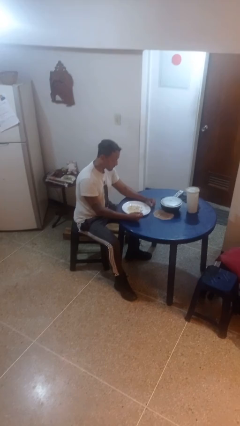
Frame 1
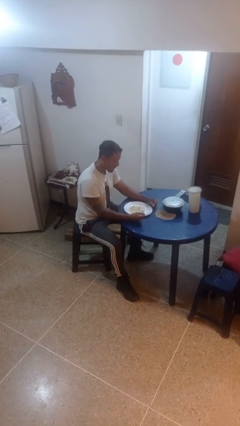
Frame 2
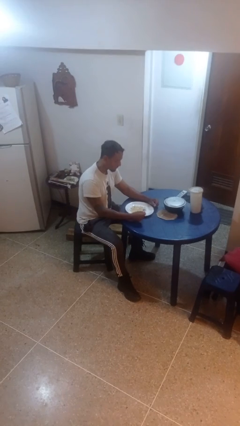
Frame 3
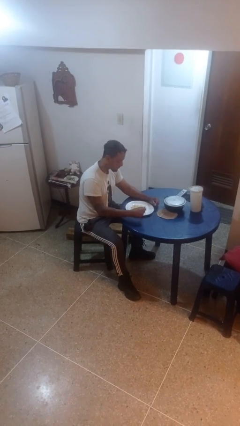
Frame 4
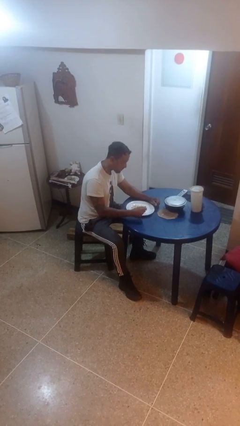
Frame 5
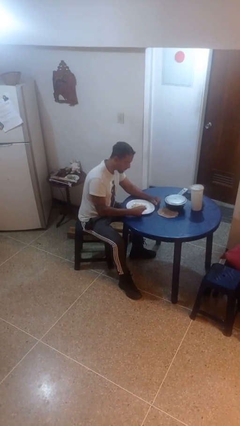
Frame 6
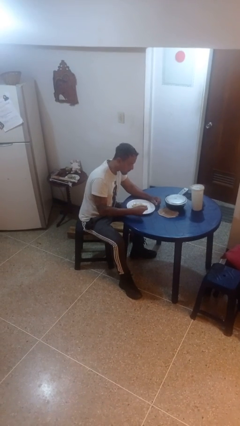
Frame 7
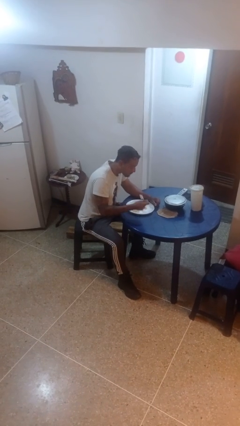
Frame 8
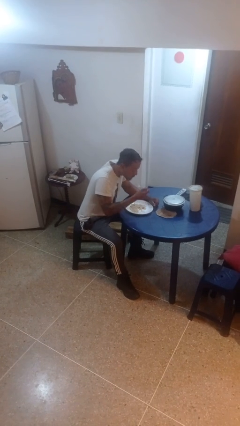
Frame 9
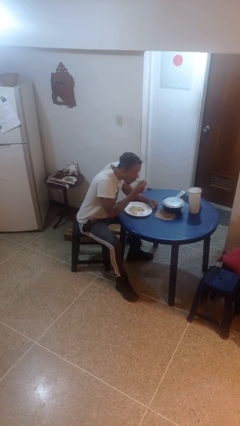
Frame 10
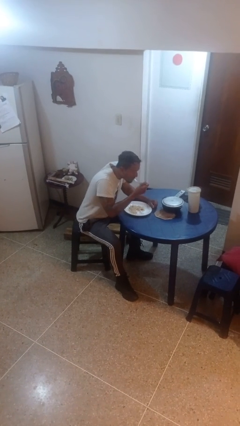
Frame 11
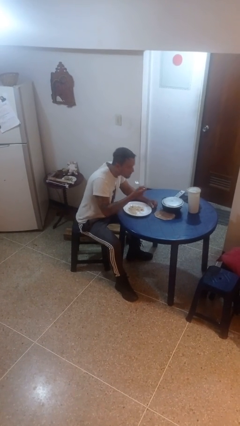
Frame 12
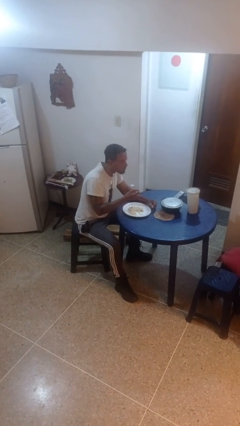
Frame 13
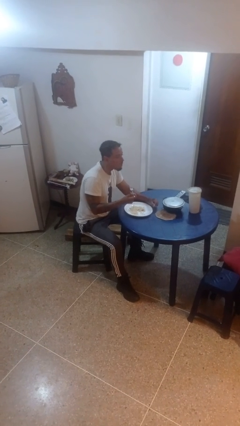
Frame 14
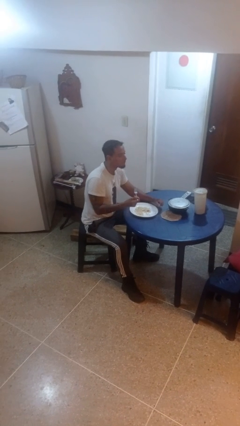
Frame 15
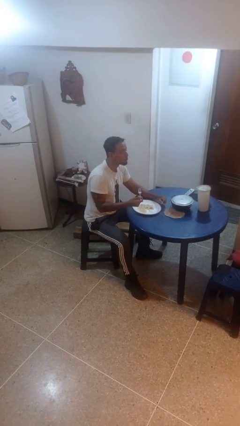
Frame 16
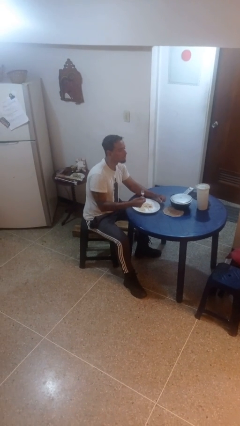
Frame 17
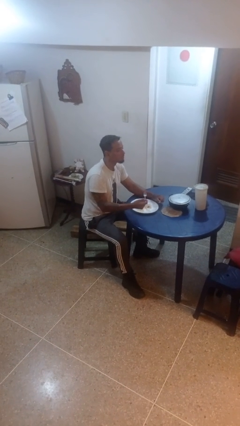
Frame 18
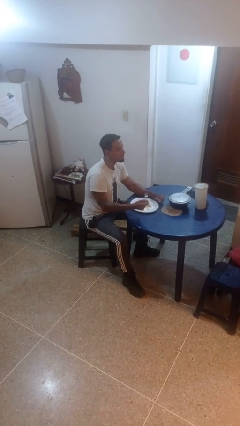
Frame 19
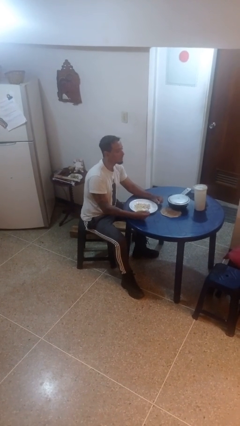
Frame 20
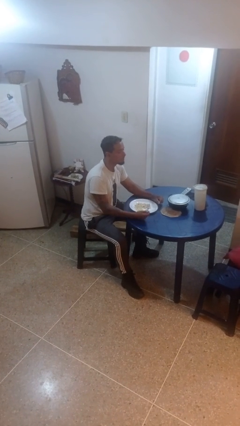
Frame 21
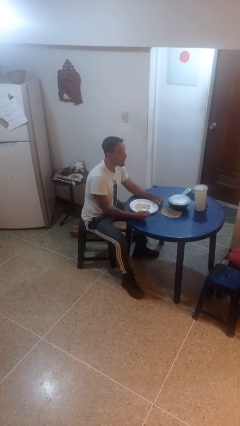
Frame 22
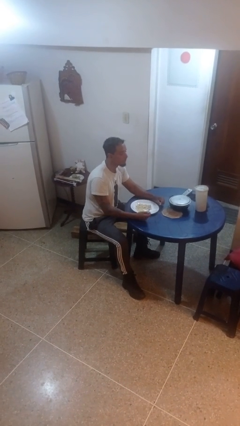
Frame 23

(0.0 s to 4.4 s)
person eats with utensil

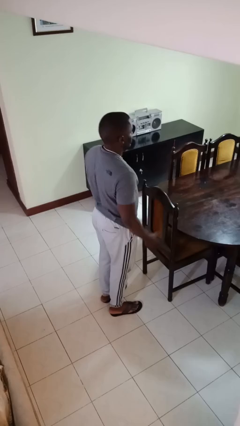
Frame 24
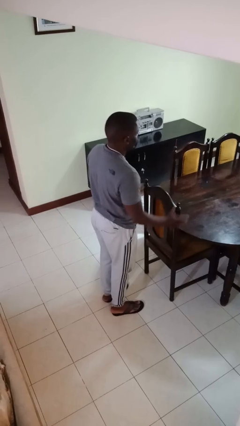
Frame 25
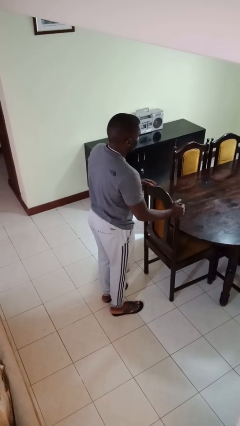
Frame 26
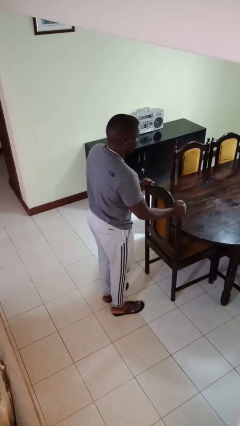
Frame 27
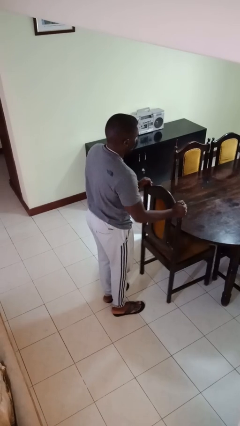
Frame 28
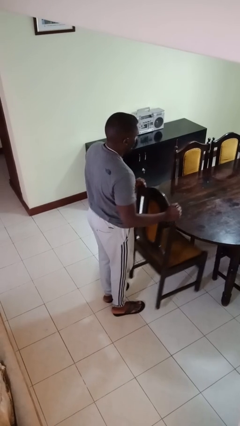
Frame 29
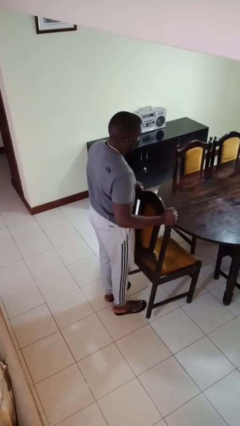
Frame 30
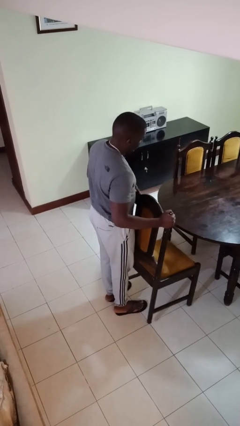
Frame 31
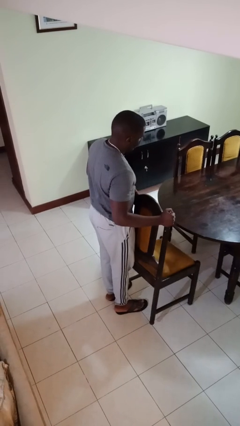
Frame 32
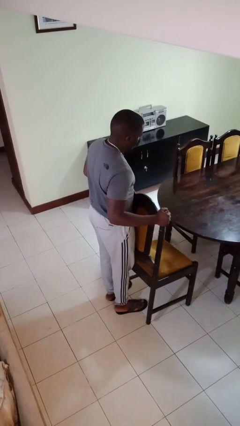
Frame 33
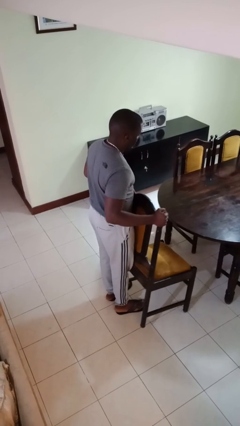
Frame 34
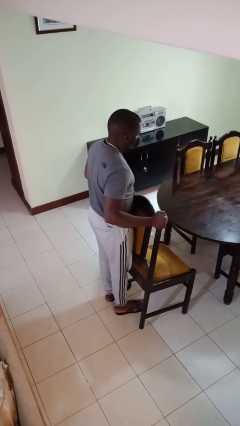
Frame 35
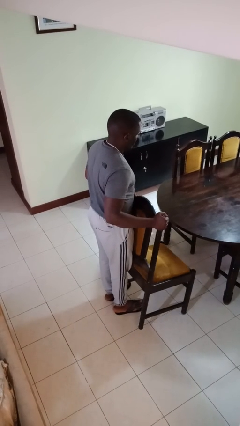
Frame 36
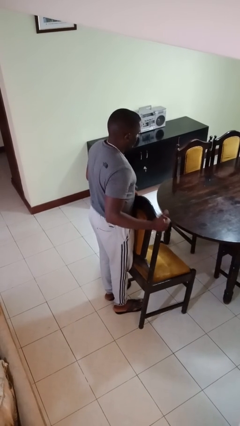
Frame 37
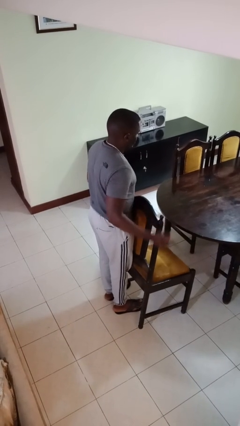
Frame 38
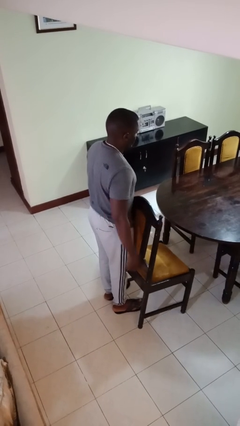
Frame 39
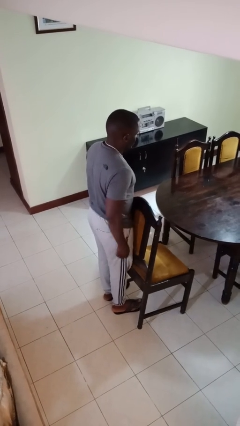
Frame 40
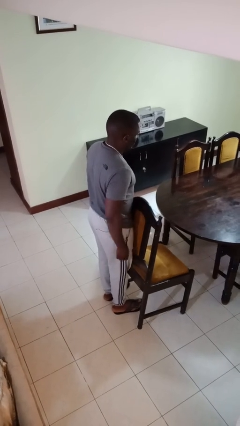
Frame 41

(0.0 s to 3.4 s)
person pulls out chair

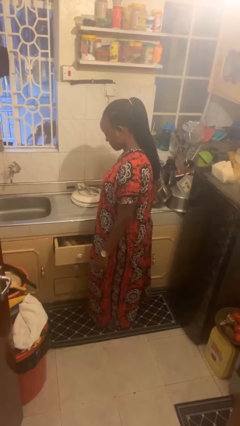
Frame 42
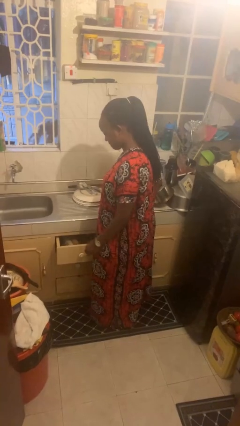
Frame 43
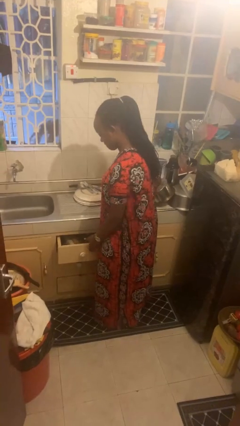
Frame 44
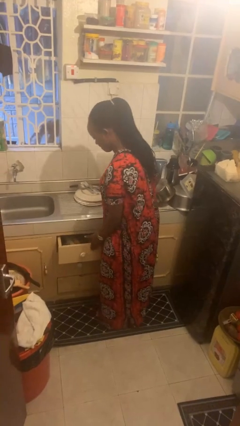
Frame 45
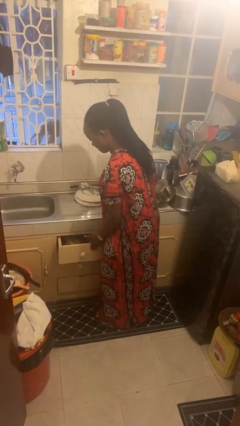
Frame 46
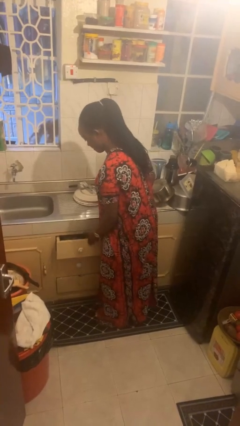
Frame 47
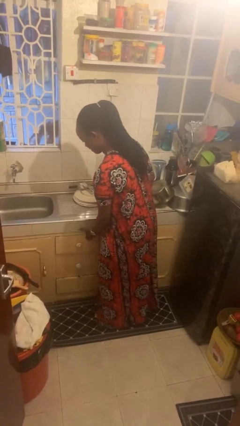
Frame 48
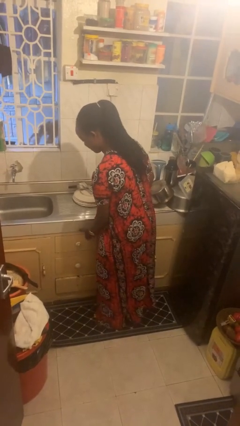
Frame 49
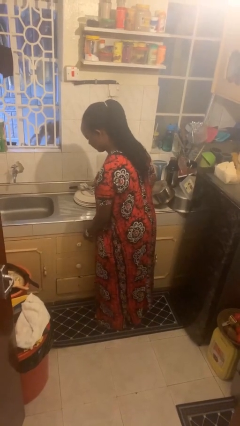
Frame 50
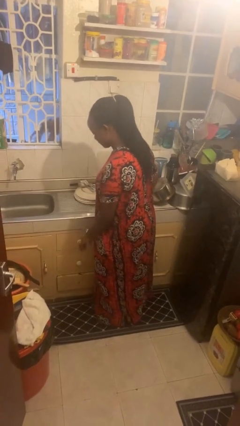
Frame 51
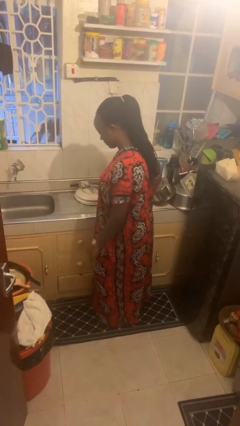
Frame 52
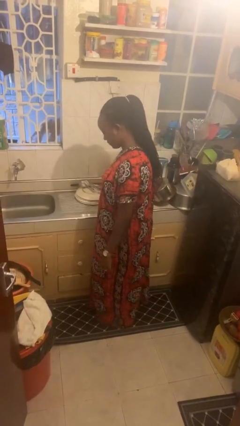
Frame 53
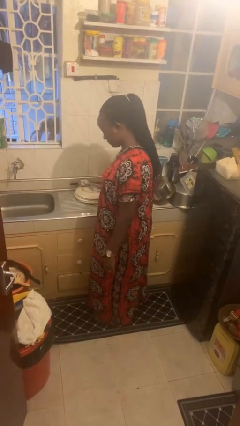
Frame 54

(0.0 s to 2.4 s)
person closes kitchen drawer

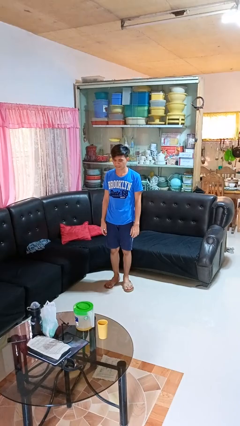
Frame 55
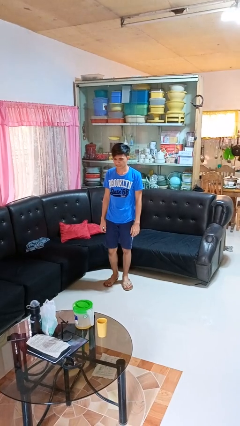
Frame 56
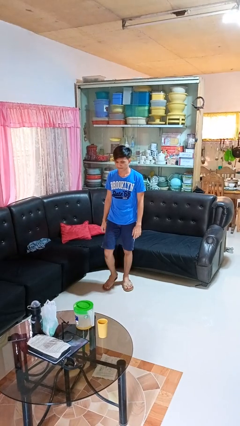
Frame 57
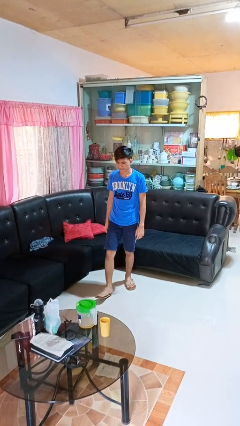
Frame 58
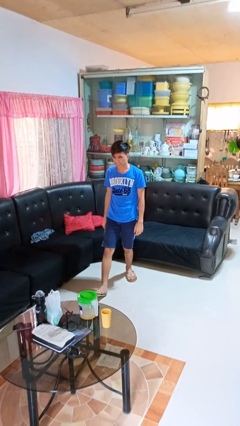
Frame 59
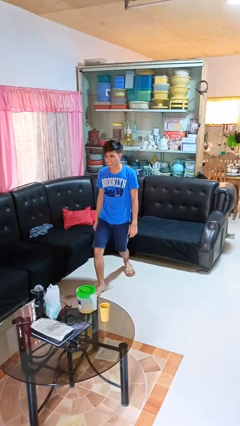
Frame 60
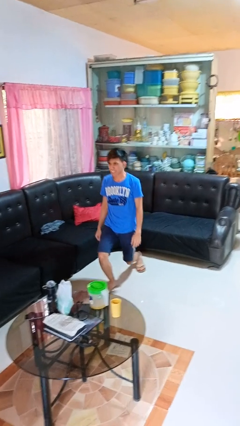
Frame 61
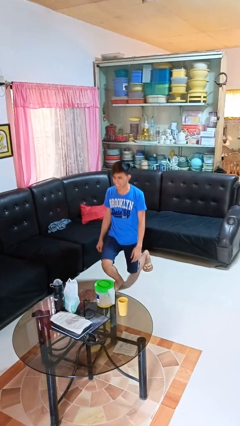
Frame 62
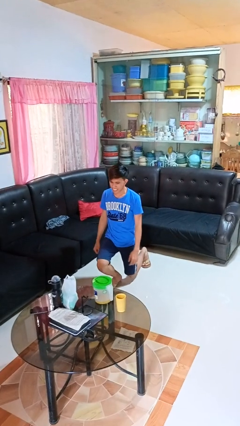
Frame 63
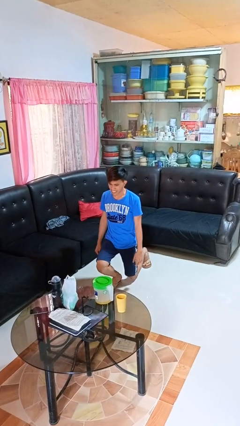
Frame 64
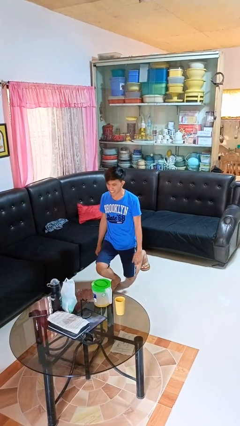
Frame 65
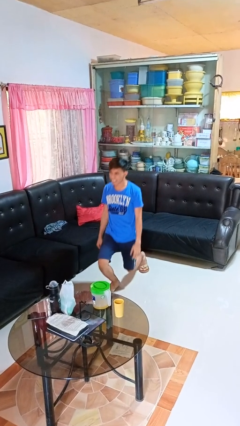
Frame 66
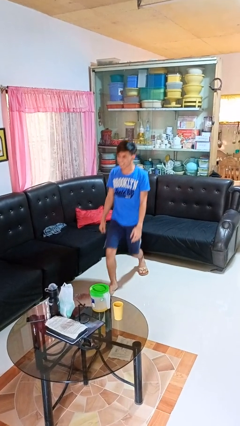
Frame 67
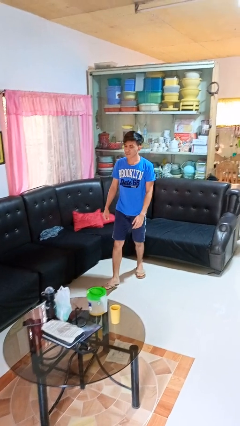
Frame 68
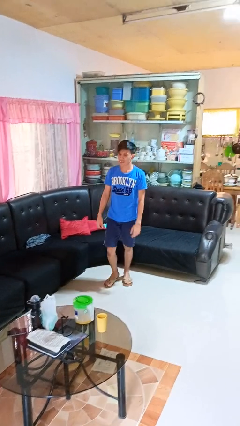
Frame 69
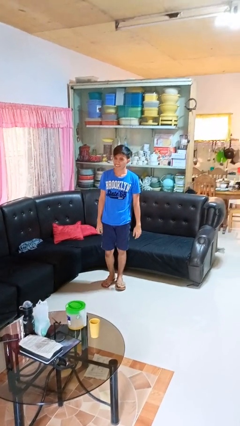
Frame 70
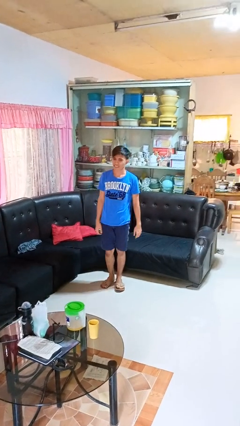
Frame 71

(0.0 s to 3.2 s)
person exercises with lunges

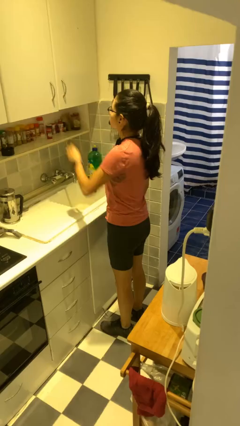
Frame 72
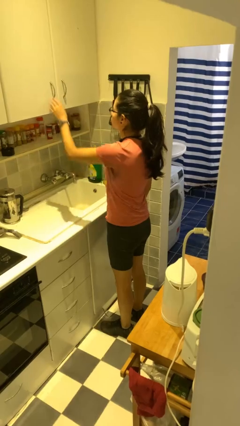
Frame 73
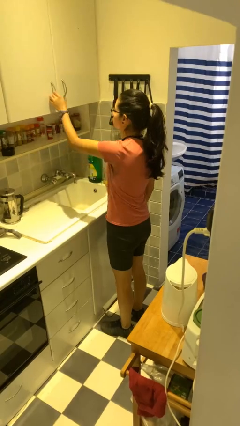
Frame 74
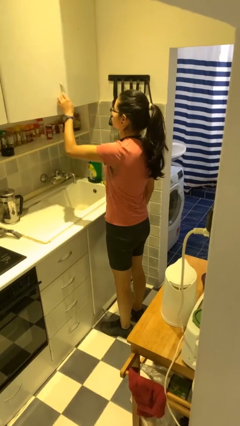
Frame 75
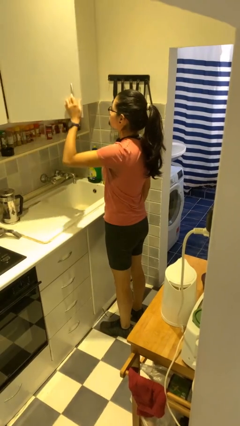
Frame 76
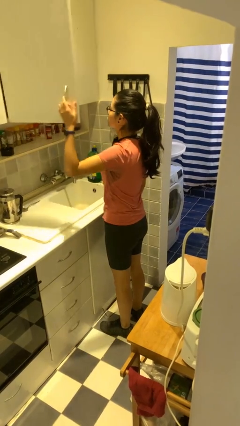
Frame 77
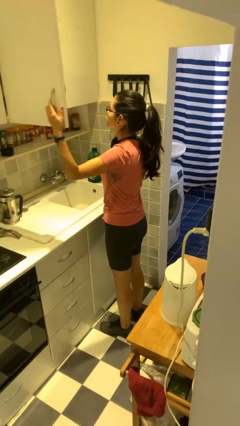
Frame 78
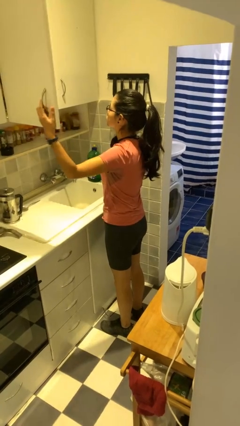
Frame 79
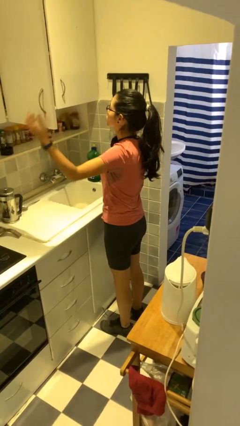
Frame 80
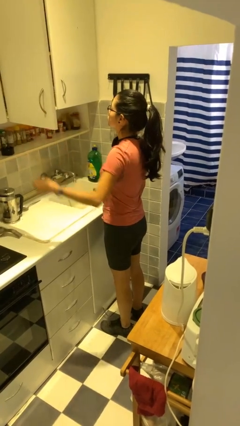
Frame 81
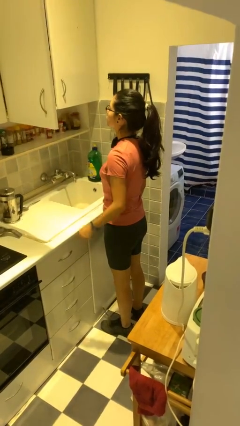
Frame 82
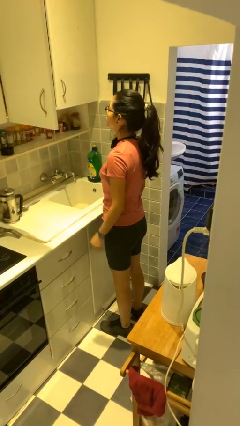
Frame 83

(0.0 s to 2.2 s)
person opens cabinet

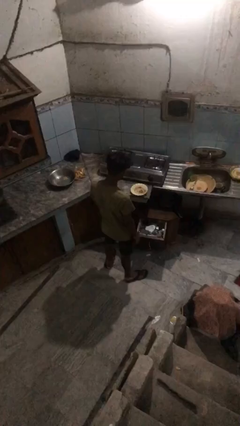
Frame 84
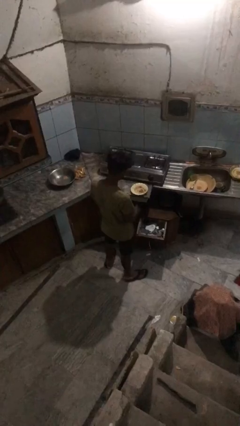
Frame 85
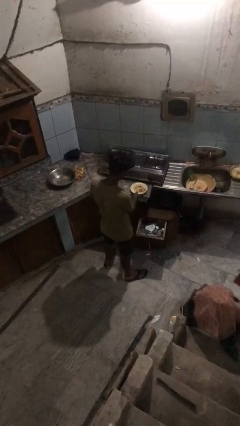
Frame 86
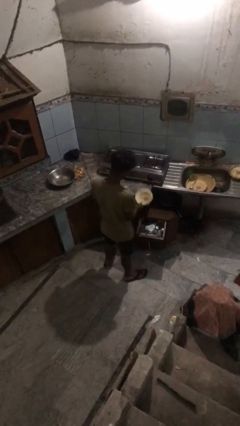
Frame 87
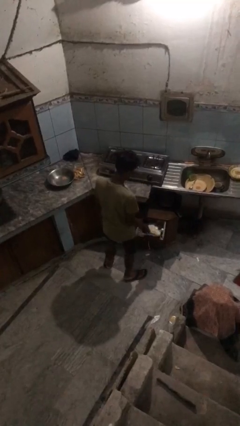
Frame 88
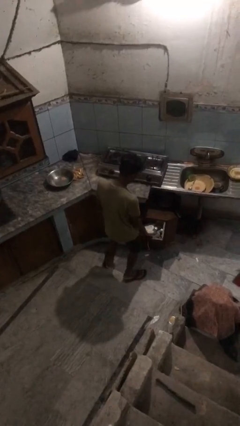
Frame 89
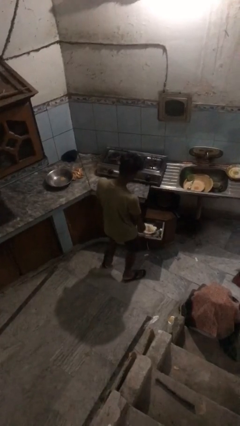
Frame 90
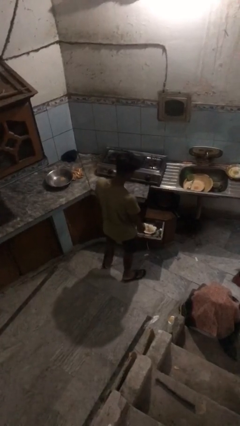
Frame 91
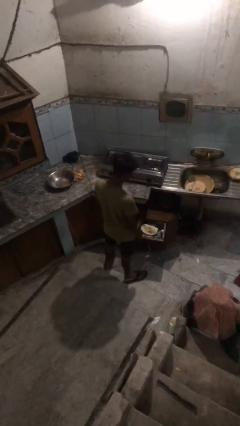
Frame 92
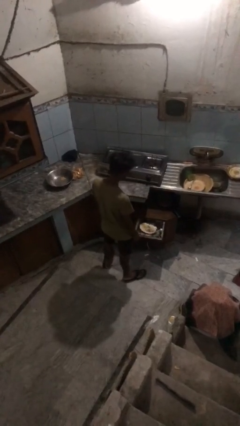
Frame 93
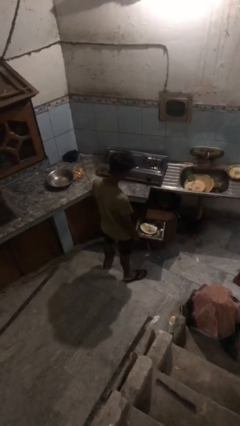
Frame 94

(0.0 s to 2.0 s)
person puts object into kitchen drawer
